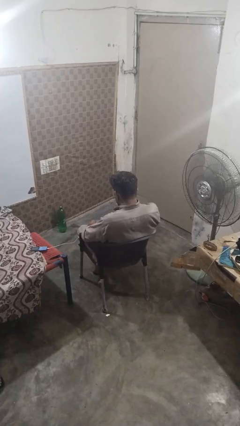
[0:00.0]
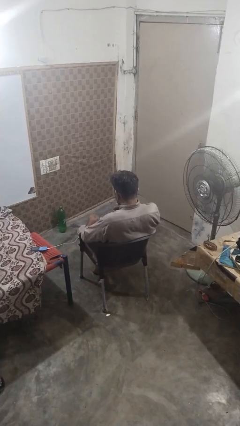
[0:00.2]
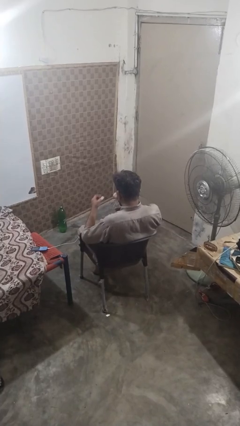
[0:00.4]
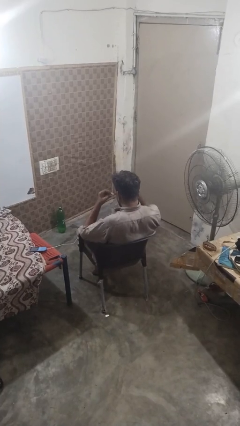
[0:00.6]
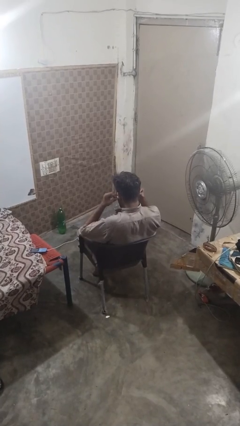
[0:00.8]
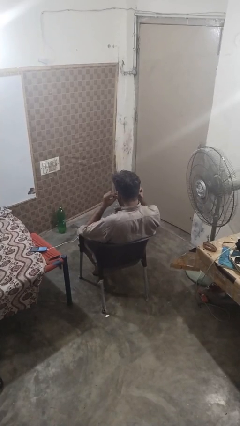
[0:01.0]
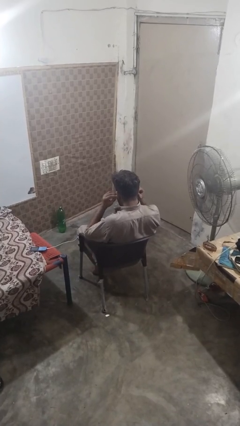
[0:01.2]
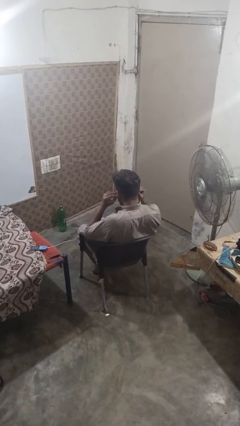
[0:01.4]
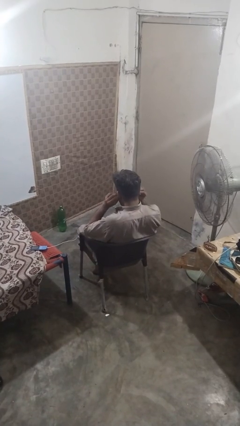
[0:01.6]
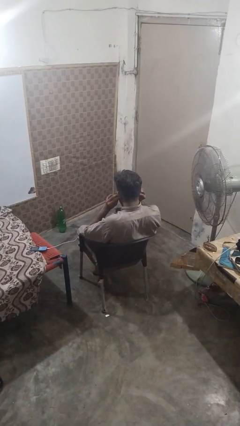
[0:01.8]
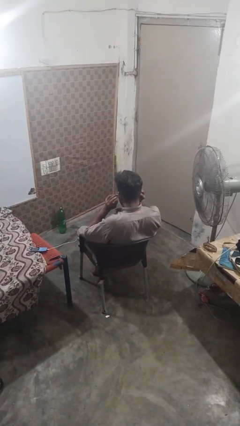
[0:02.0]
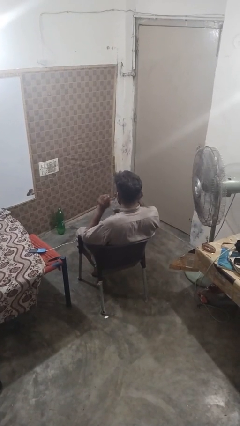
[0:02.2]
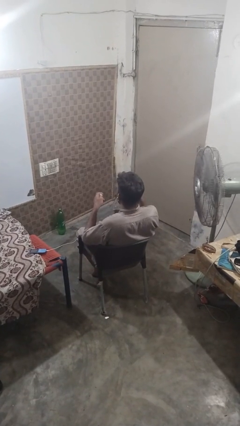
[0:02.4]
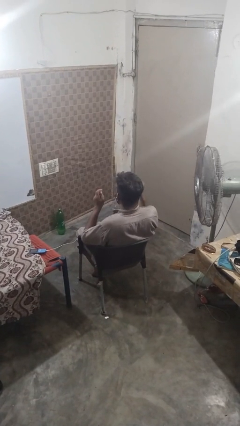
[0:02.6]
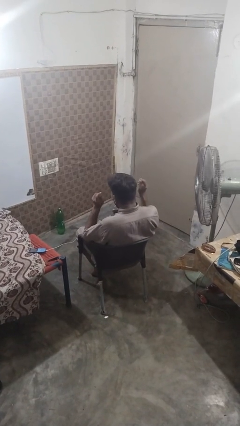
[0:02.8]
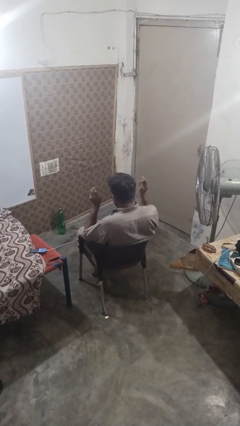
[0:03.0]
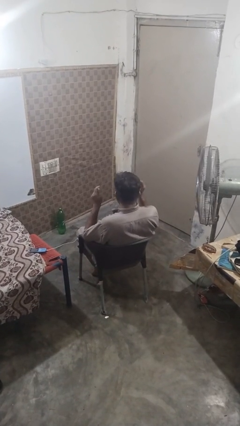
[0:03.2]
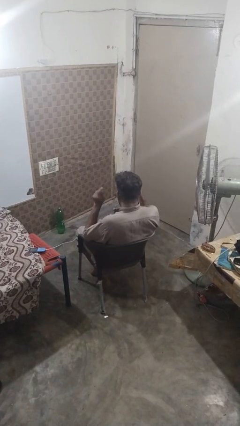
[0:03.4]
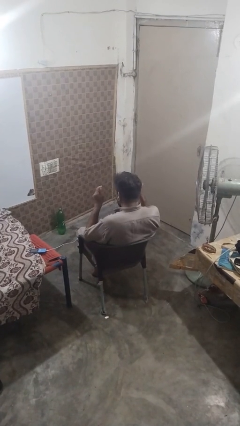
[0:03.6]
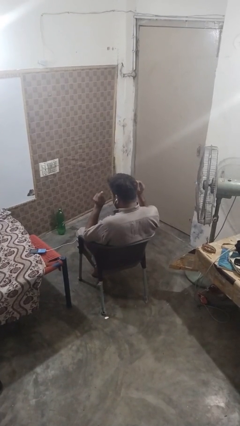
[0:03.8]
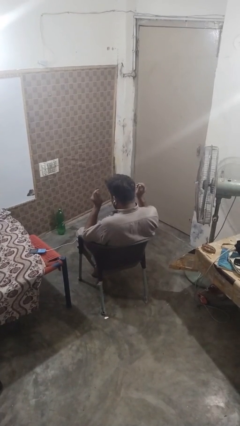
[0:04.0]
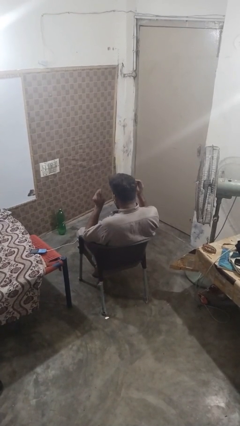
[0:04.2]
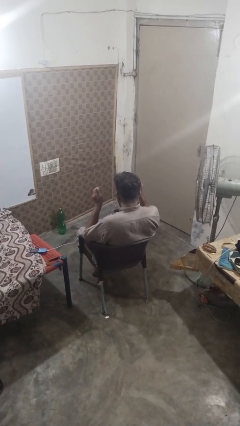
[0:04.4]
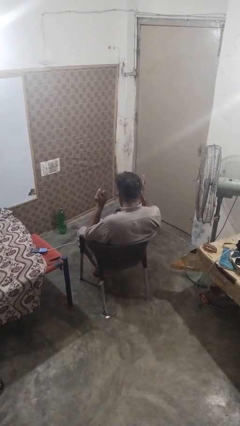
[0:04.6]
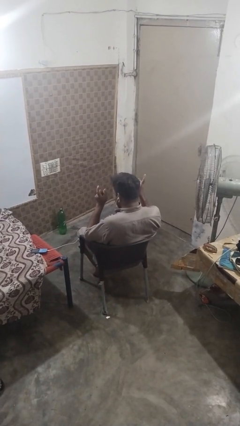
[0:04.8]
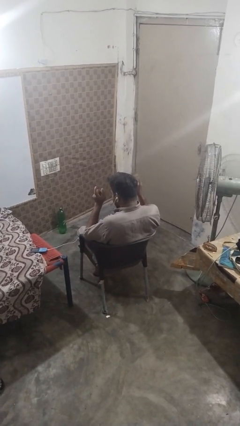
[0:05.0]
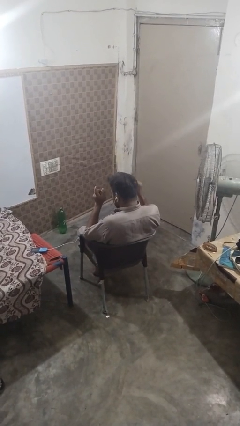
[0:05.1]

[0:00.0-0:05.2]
person puts on headphones

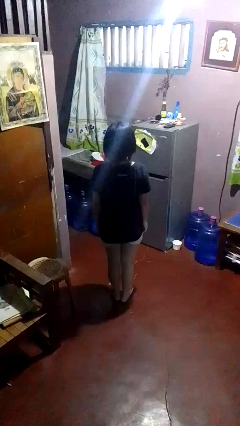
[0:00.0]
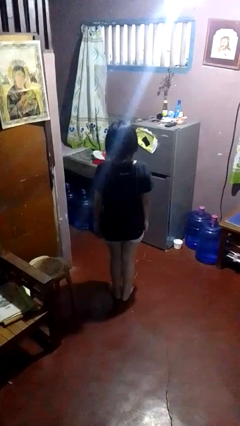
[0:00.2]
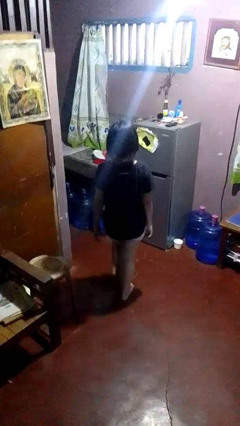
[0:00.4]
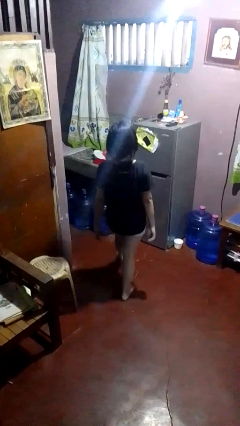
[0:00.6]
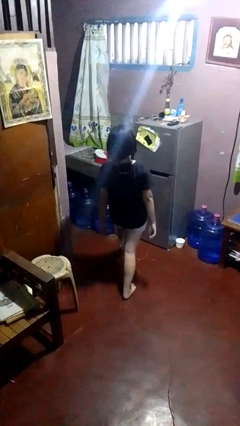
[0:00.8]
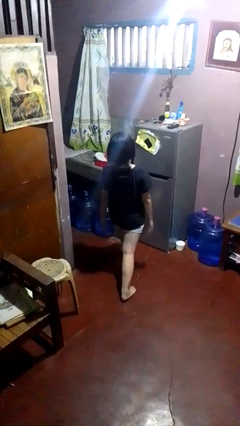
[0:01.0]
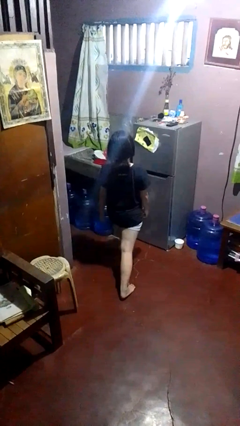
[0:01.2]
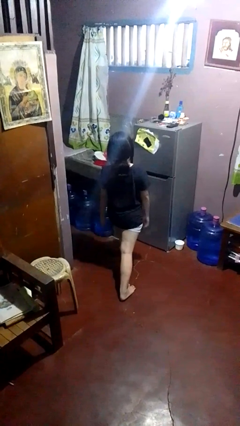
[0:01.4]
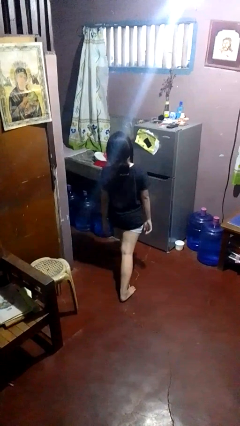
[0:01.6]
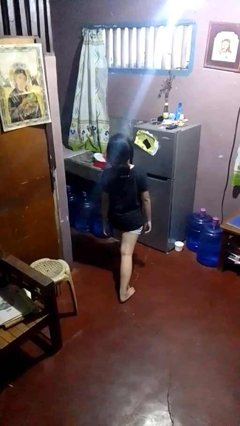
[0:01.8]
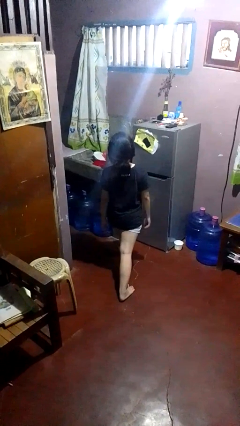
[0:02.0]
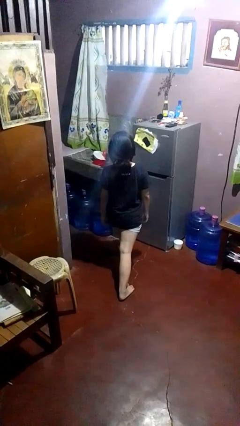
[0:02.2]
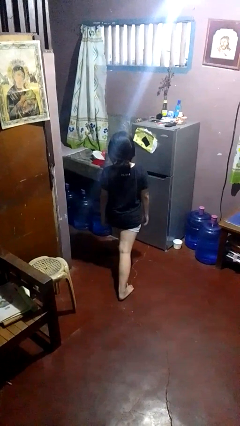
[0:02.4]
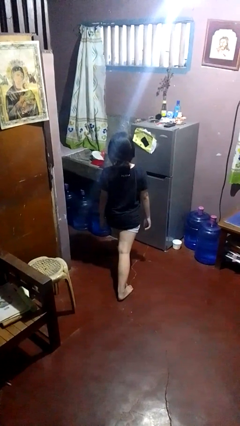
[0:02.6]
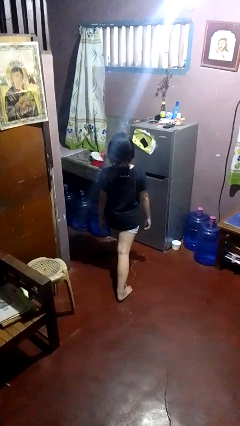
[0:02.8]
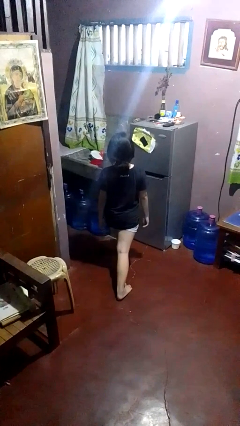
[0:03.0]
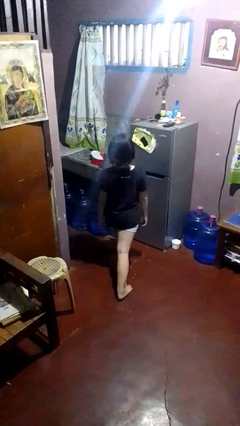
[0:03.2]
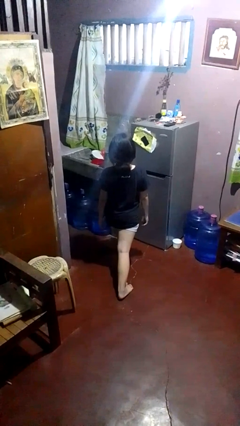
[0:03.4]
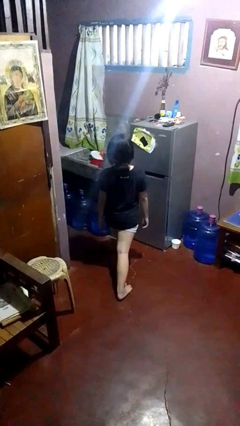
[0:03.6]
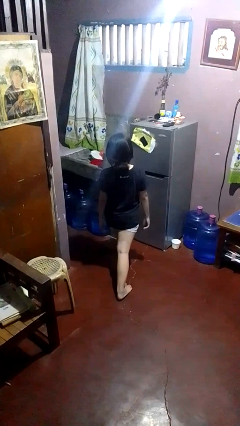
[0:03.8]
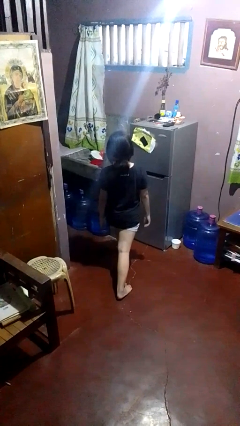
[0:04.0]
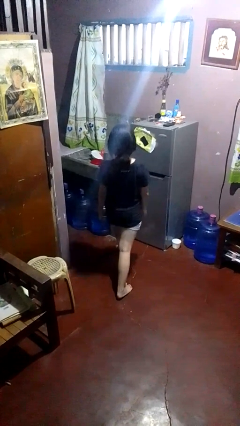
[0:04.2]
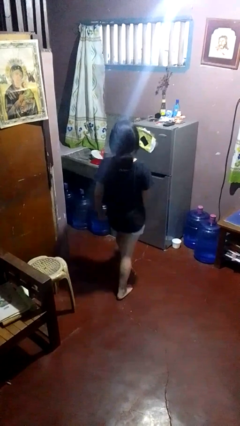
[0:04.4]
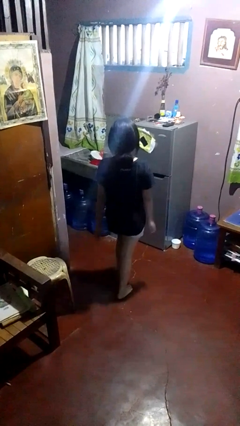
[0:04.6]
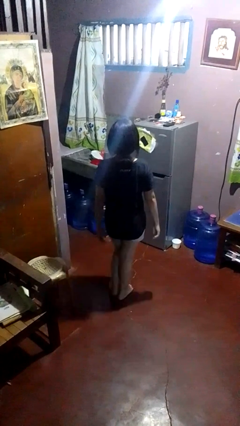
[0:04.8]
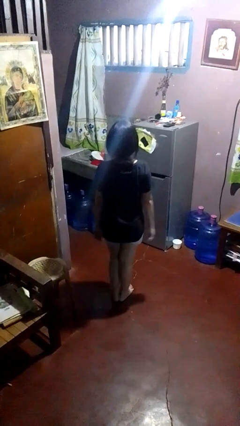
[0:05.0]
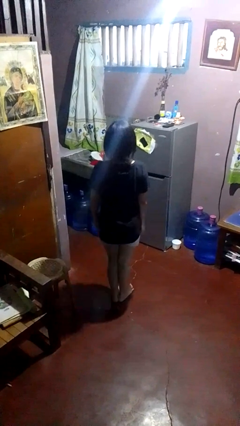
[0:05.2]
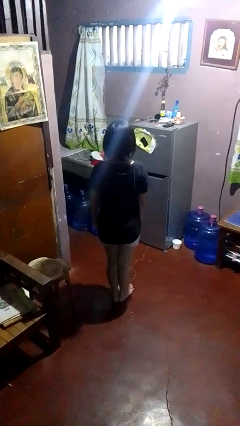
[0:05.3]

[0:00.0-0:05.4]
person exercises with lunges

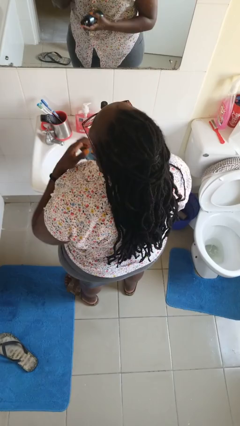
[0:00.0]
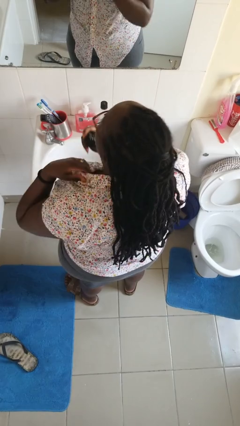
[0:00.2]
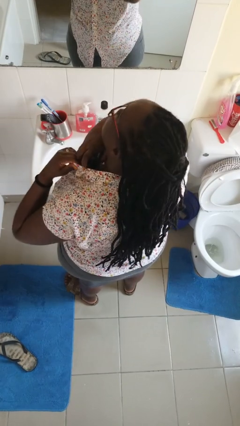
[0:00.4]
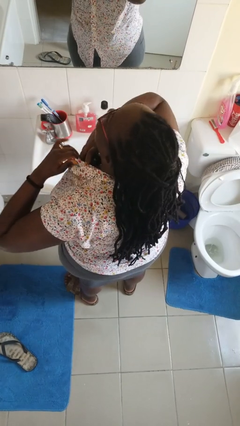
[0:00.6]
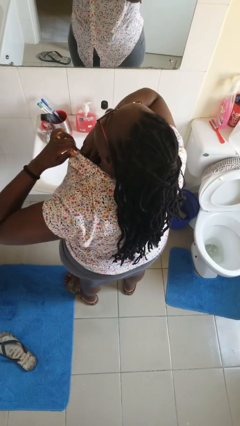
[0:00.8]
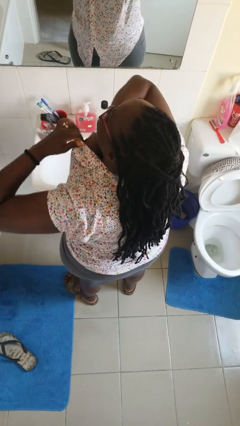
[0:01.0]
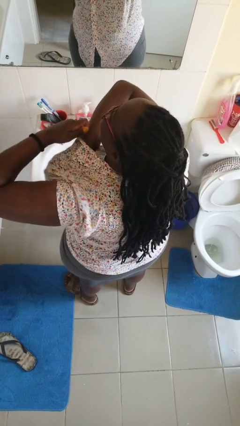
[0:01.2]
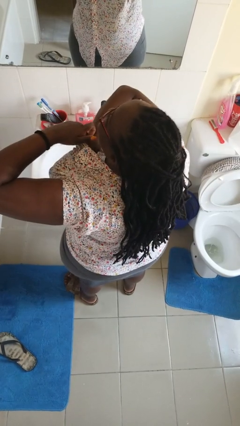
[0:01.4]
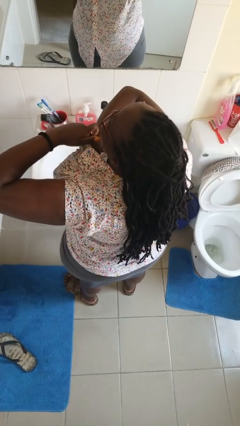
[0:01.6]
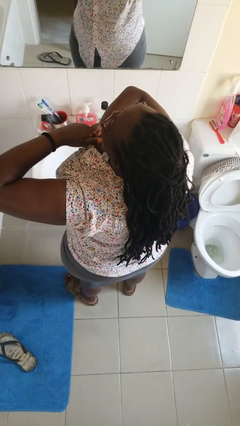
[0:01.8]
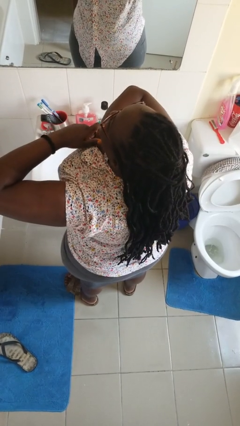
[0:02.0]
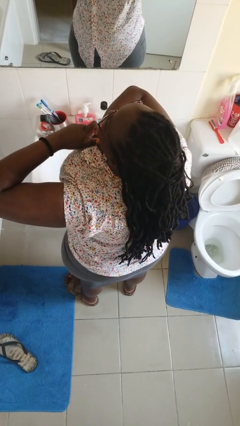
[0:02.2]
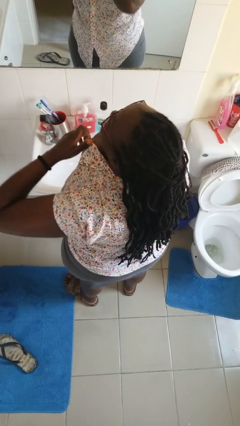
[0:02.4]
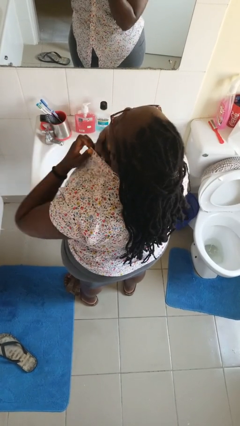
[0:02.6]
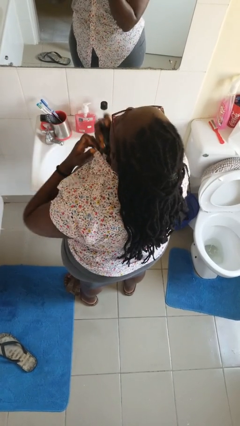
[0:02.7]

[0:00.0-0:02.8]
person applies deodorant

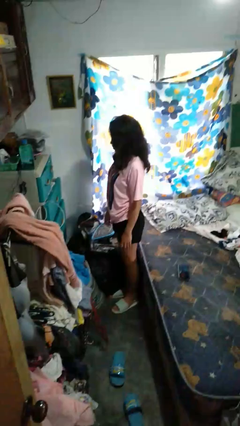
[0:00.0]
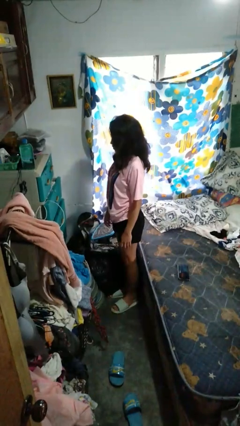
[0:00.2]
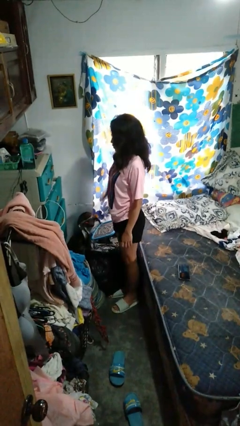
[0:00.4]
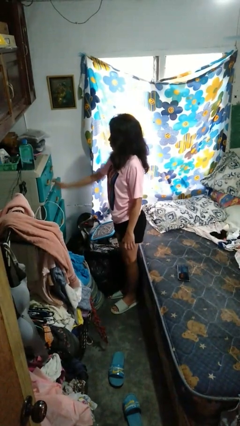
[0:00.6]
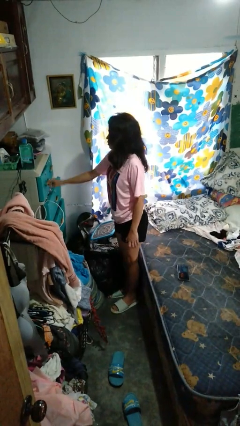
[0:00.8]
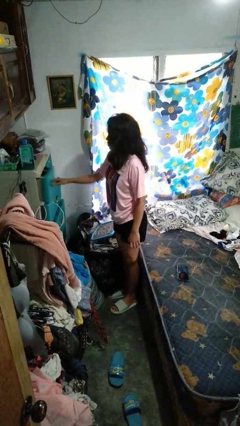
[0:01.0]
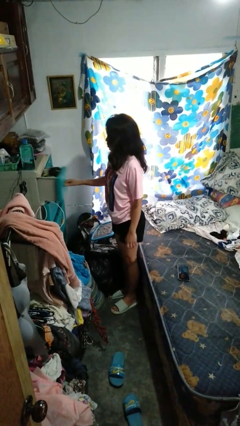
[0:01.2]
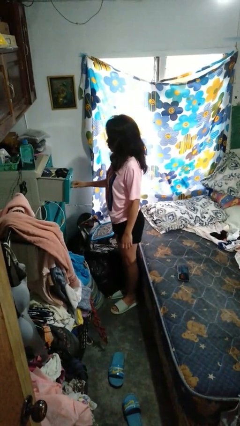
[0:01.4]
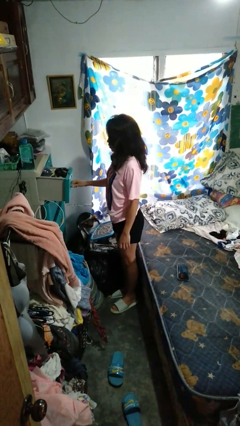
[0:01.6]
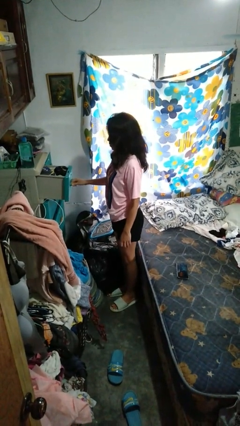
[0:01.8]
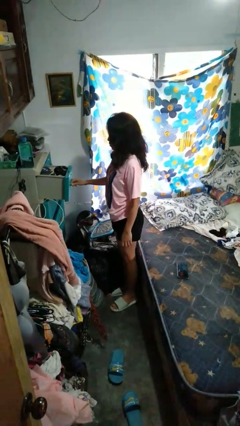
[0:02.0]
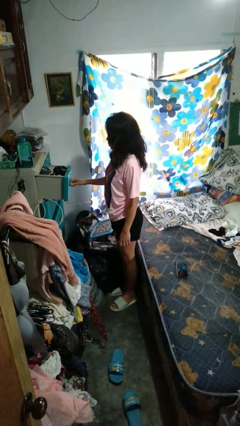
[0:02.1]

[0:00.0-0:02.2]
person opens dresser drawer

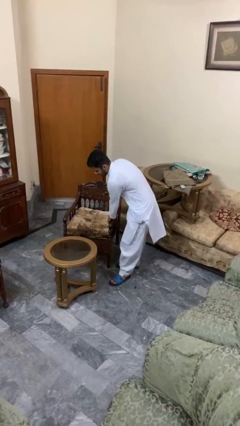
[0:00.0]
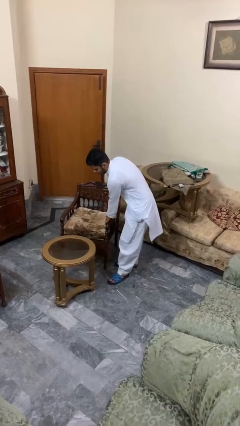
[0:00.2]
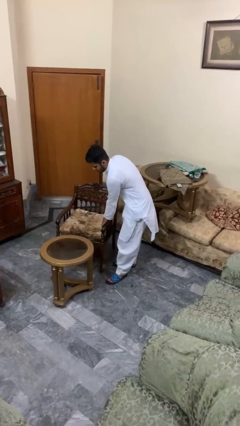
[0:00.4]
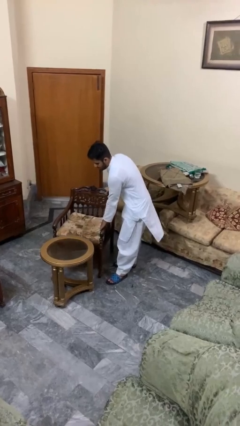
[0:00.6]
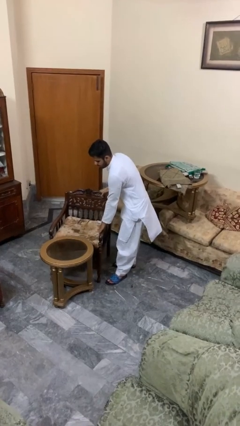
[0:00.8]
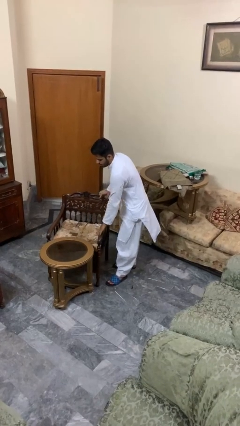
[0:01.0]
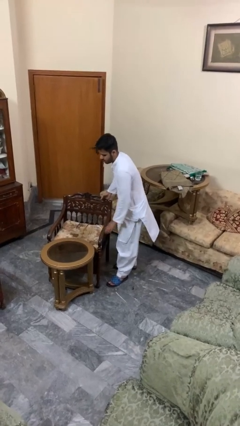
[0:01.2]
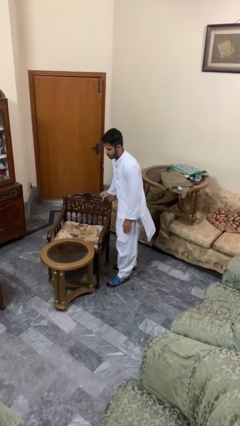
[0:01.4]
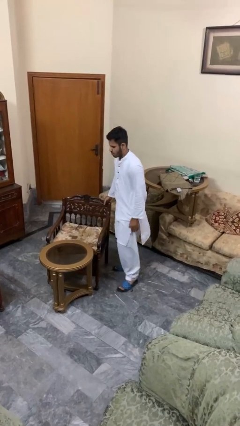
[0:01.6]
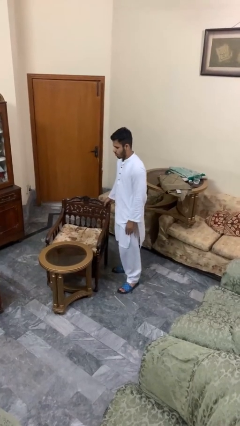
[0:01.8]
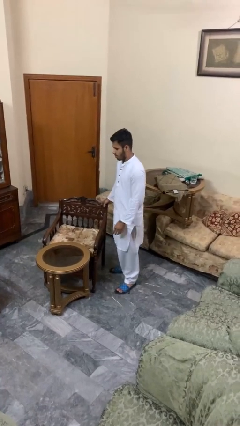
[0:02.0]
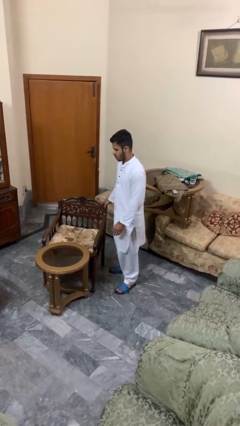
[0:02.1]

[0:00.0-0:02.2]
person pushes in chair
